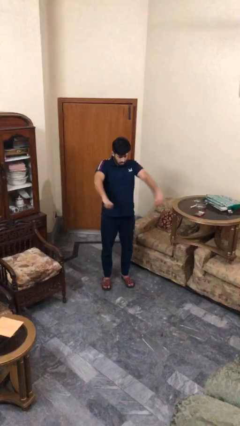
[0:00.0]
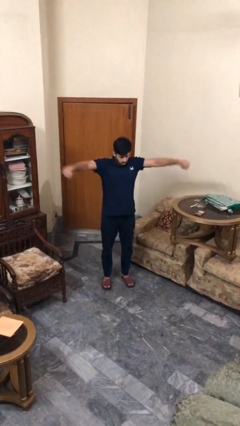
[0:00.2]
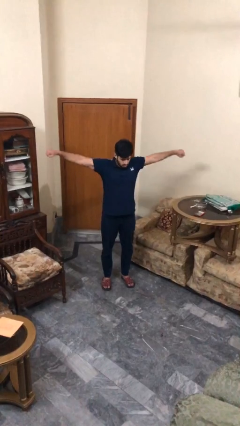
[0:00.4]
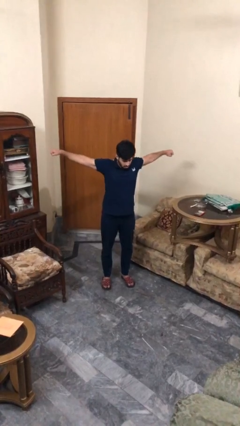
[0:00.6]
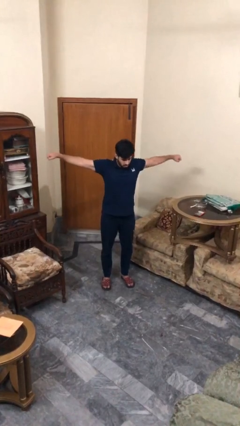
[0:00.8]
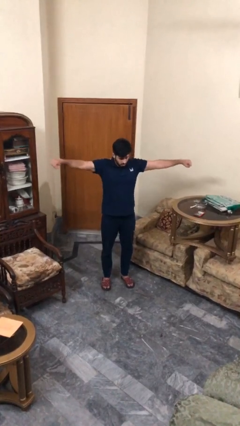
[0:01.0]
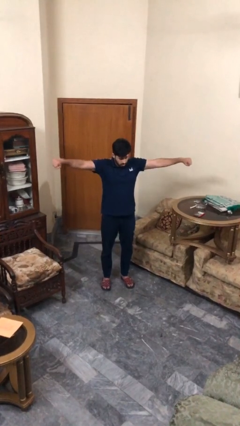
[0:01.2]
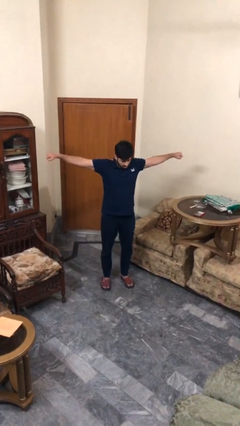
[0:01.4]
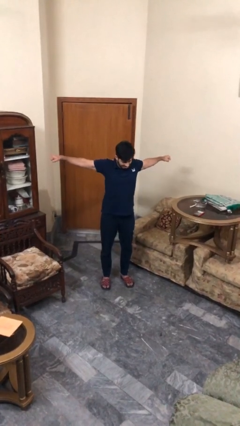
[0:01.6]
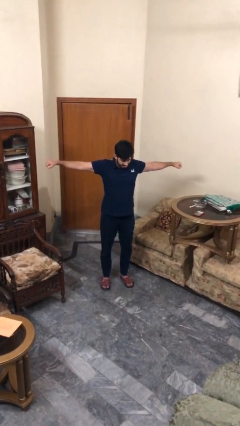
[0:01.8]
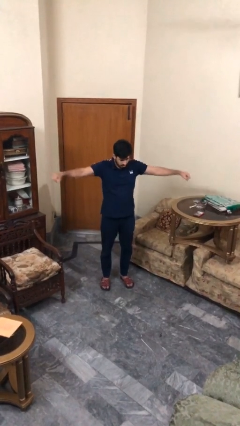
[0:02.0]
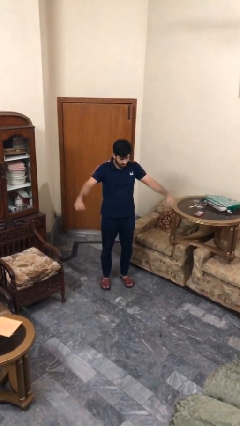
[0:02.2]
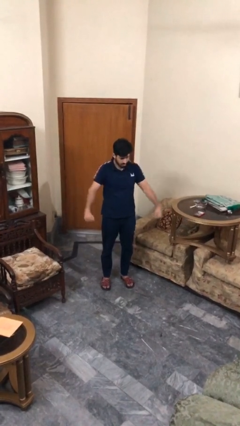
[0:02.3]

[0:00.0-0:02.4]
person stretches arms to side

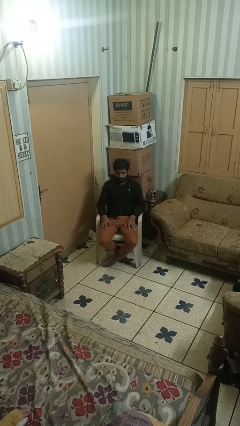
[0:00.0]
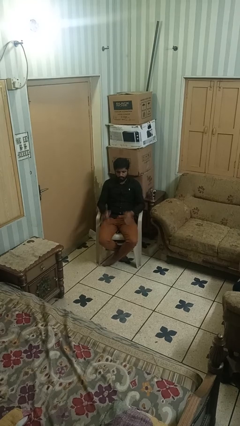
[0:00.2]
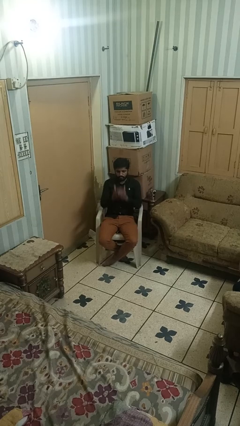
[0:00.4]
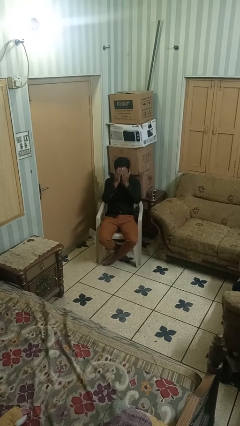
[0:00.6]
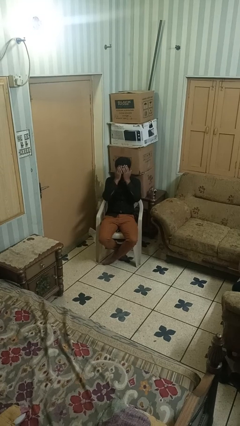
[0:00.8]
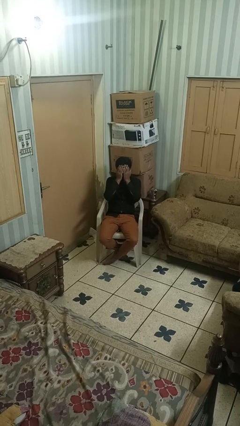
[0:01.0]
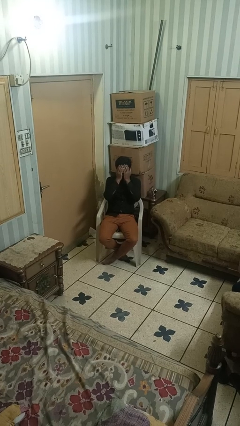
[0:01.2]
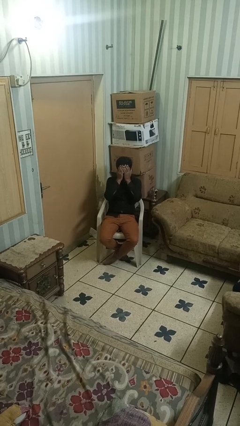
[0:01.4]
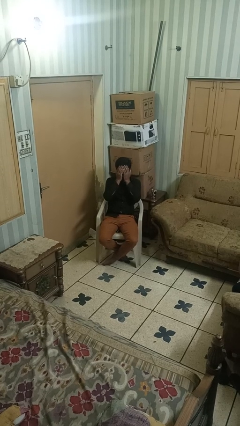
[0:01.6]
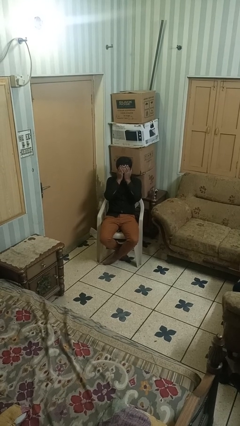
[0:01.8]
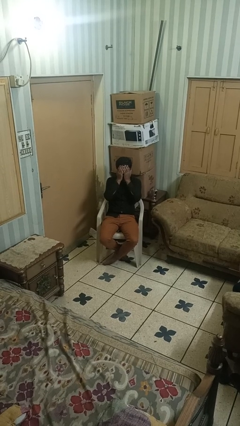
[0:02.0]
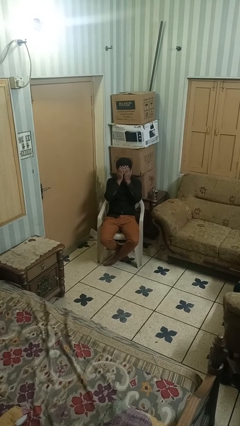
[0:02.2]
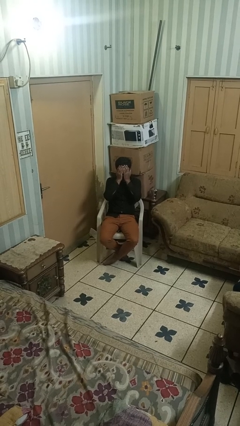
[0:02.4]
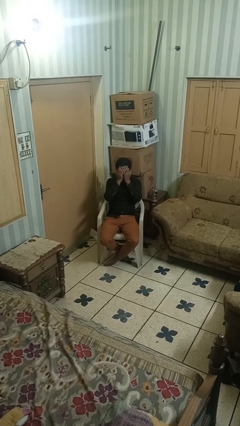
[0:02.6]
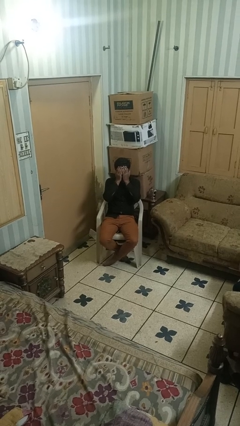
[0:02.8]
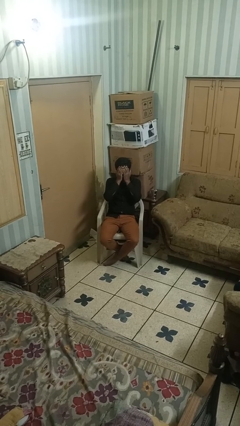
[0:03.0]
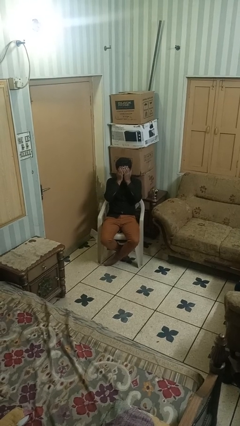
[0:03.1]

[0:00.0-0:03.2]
person covers face with hands

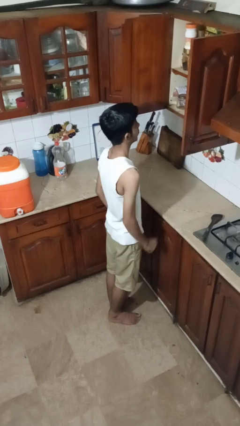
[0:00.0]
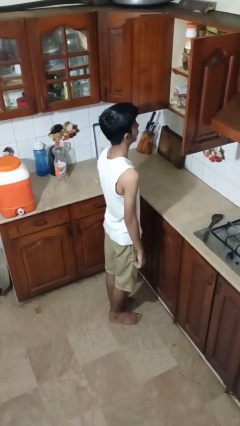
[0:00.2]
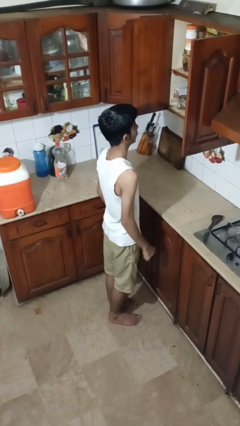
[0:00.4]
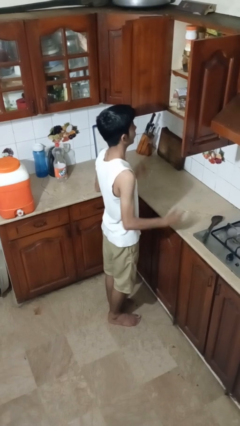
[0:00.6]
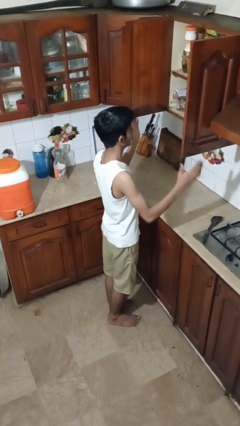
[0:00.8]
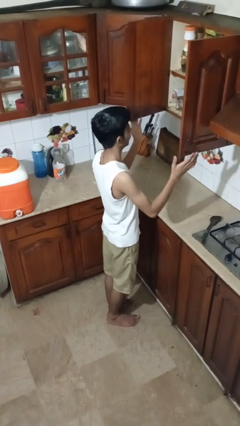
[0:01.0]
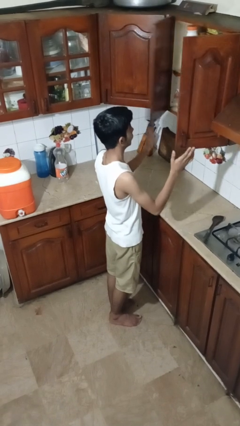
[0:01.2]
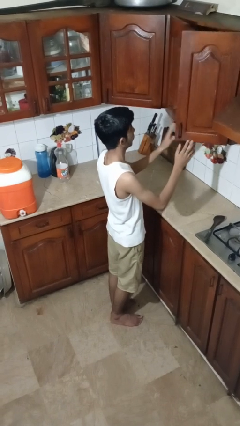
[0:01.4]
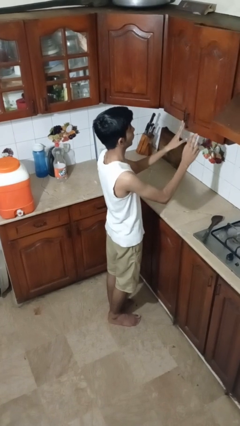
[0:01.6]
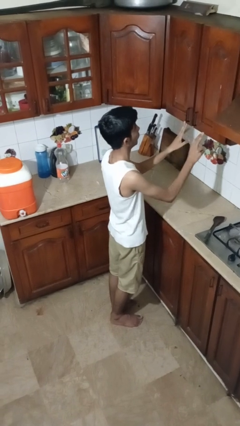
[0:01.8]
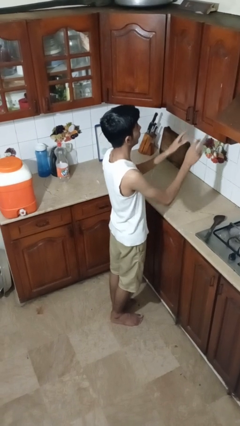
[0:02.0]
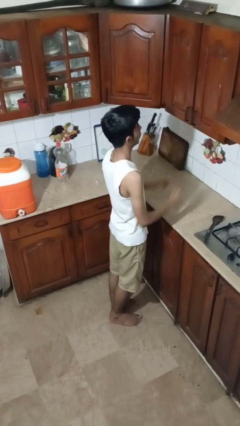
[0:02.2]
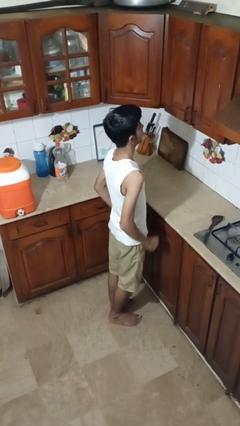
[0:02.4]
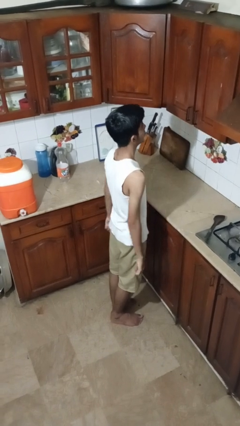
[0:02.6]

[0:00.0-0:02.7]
person closes cabinet

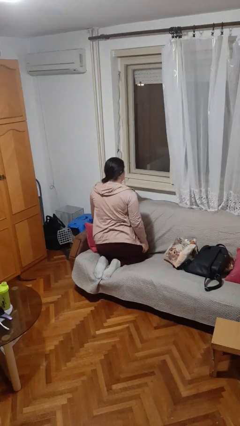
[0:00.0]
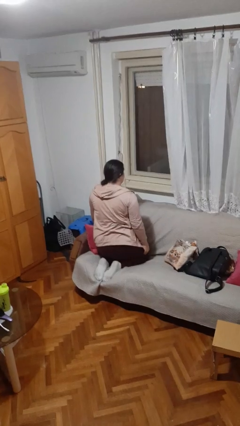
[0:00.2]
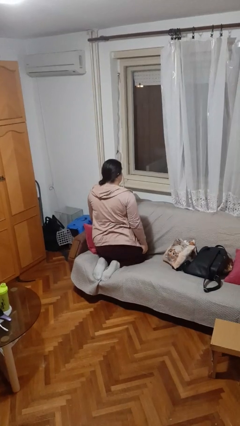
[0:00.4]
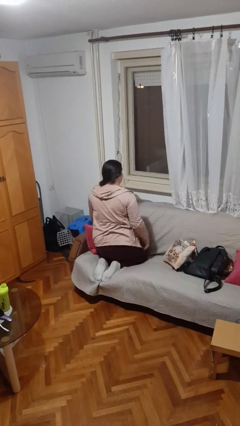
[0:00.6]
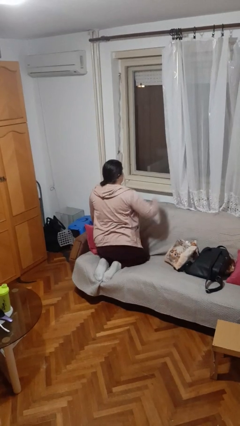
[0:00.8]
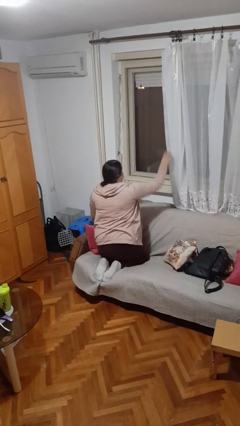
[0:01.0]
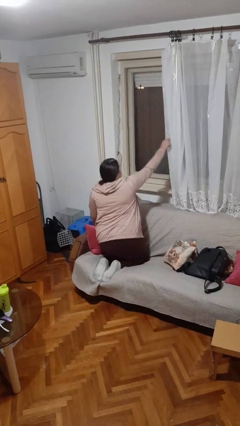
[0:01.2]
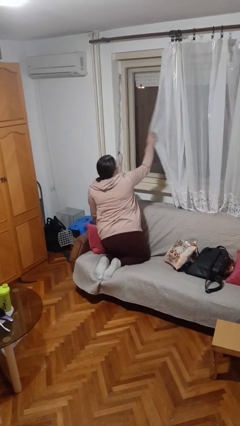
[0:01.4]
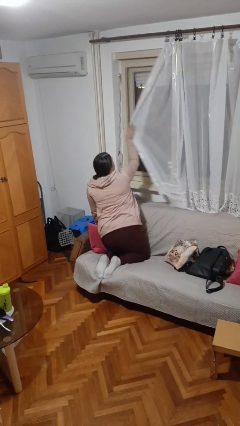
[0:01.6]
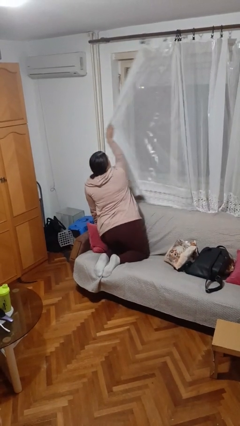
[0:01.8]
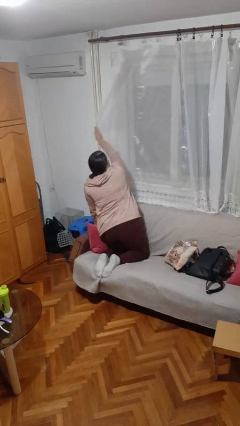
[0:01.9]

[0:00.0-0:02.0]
person closes curtains

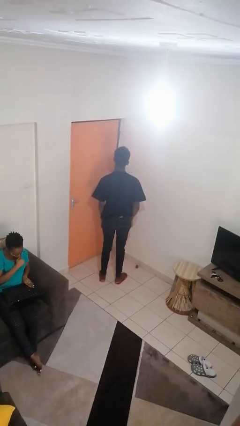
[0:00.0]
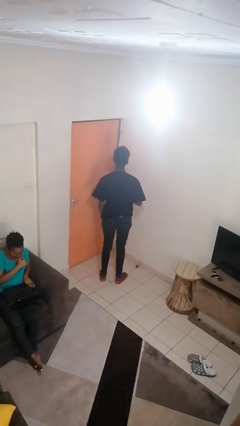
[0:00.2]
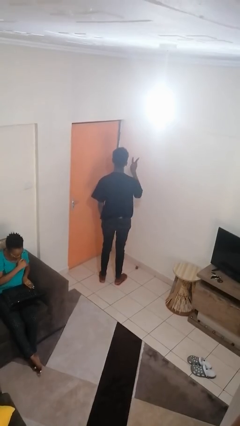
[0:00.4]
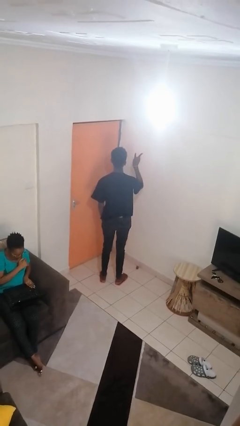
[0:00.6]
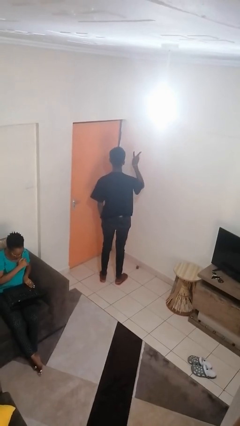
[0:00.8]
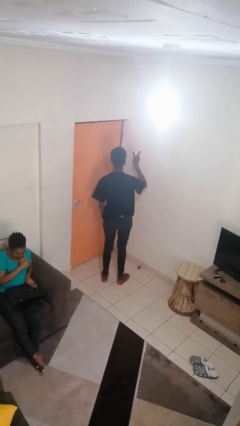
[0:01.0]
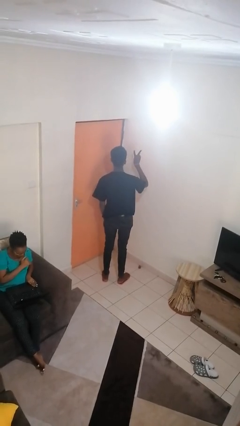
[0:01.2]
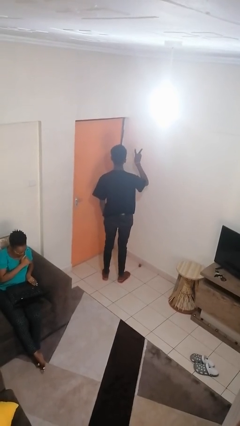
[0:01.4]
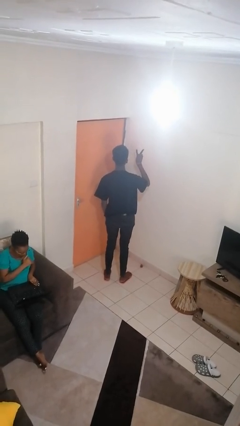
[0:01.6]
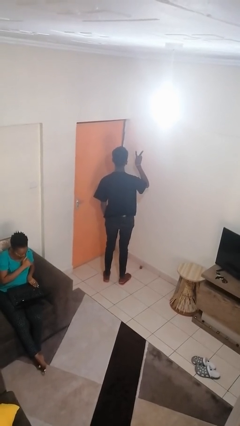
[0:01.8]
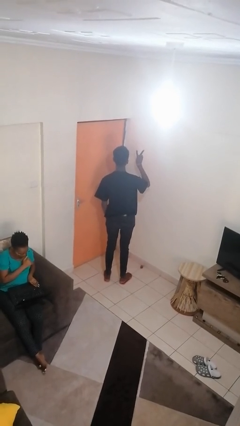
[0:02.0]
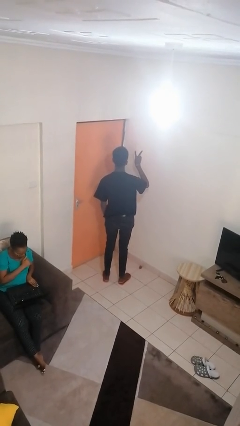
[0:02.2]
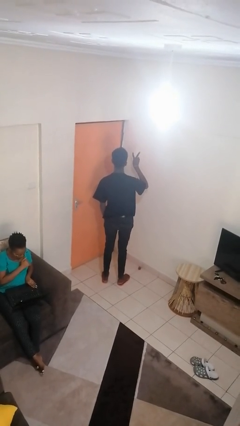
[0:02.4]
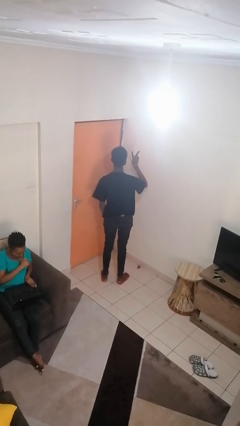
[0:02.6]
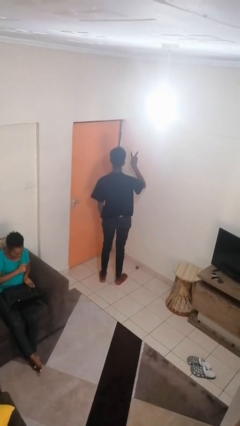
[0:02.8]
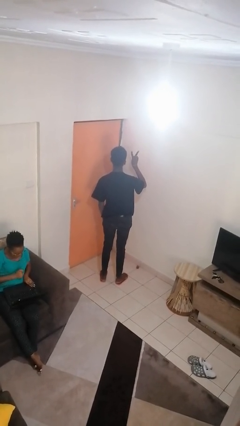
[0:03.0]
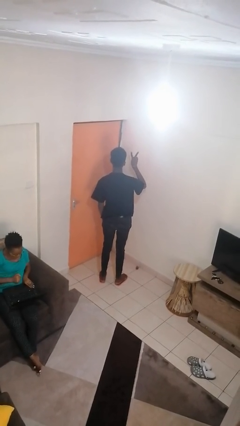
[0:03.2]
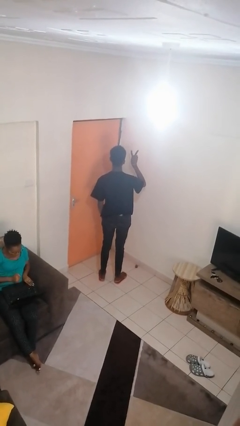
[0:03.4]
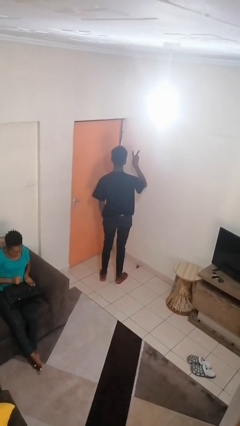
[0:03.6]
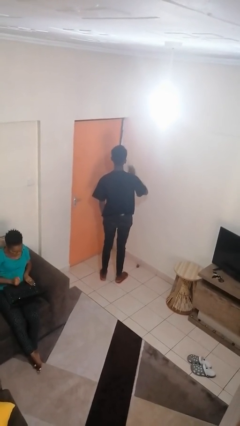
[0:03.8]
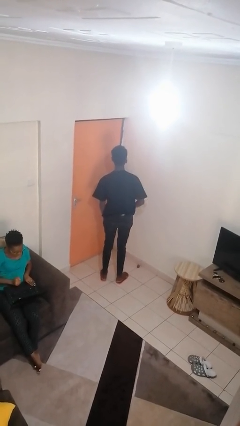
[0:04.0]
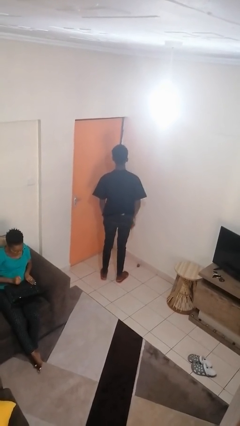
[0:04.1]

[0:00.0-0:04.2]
person gestures peace

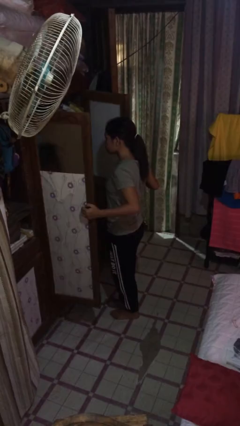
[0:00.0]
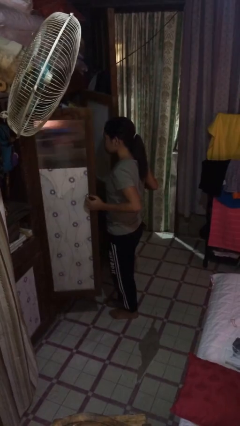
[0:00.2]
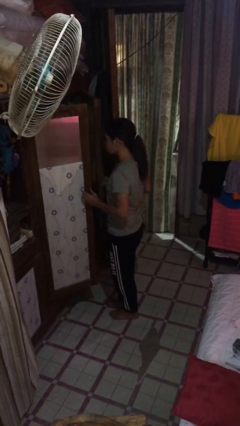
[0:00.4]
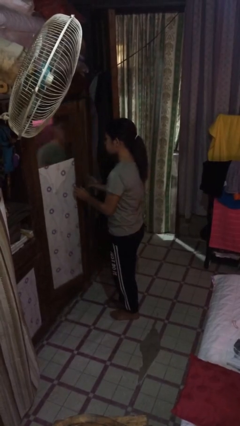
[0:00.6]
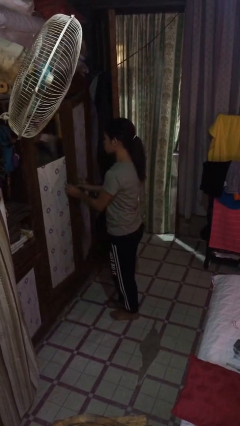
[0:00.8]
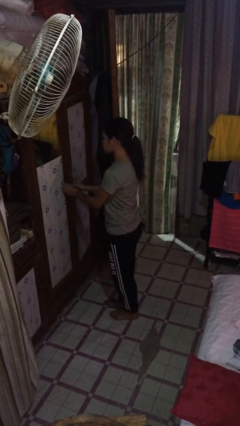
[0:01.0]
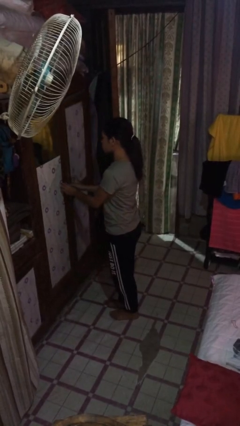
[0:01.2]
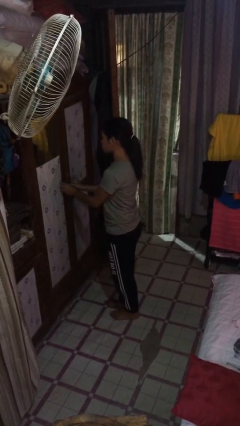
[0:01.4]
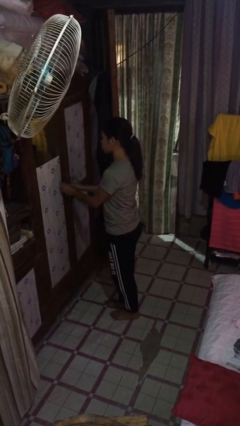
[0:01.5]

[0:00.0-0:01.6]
person closes closet door

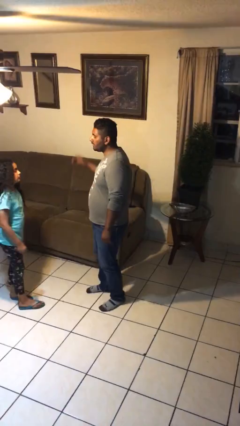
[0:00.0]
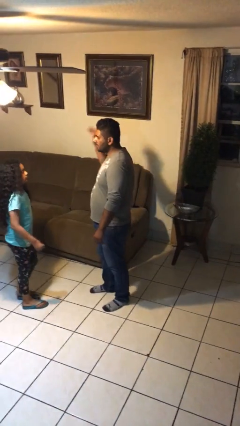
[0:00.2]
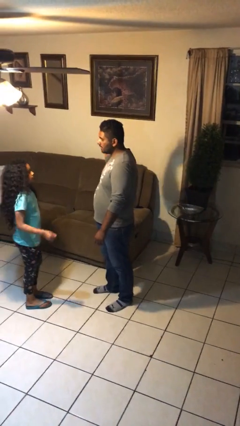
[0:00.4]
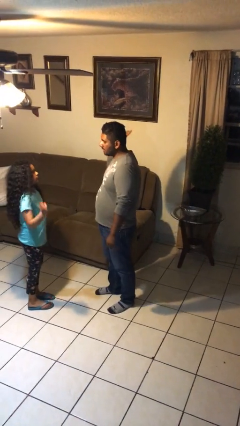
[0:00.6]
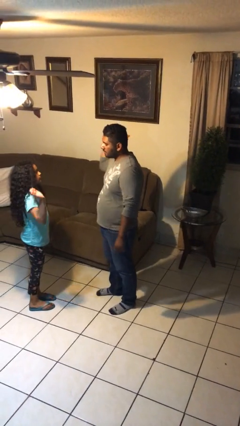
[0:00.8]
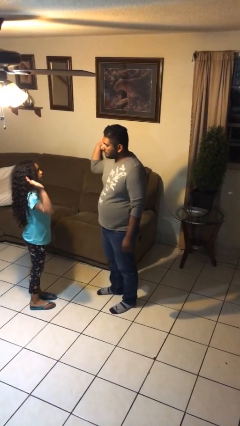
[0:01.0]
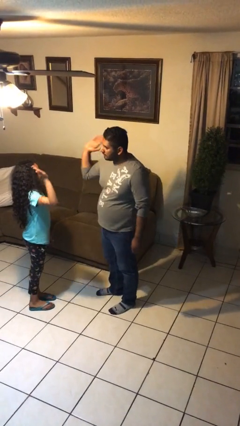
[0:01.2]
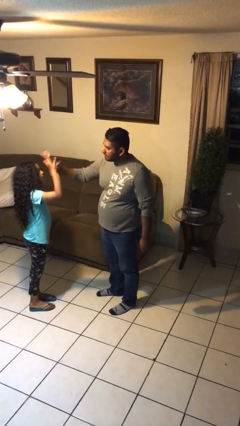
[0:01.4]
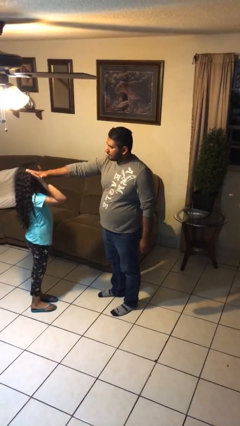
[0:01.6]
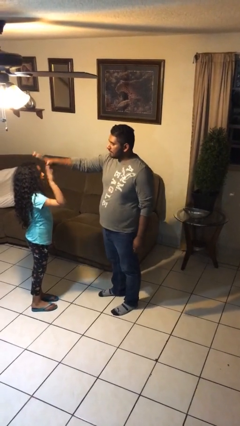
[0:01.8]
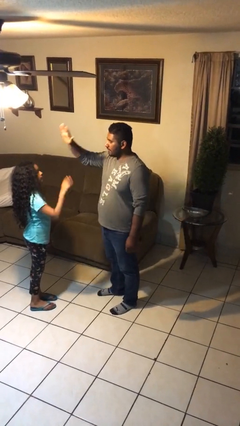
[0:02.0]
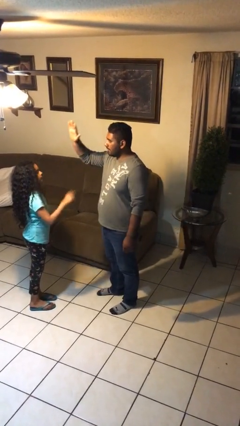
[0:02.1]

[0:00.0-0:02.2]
person highfives hand
